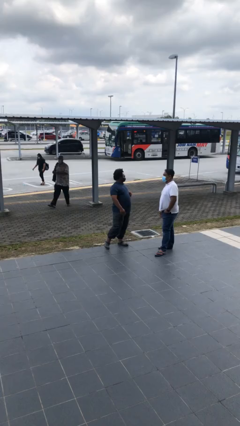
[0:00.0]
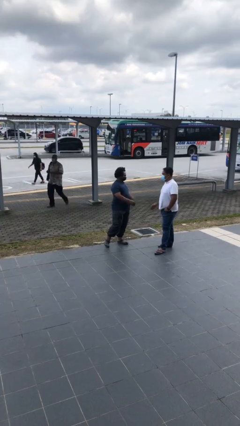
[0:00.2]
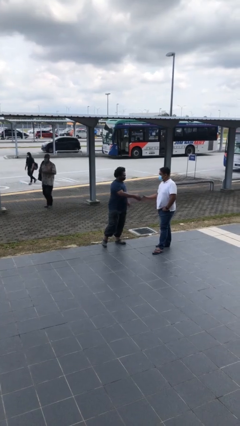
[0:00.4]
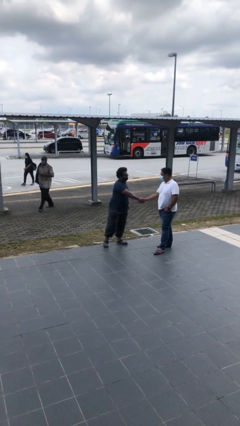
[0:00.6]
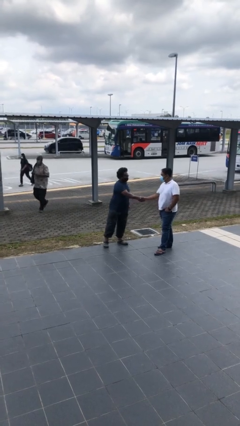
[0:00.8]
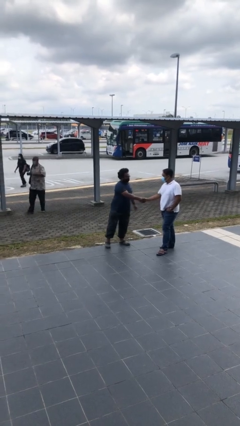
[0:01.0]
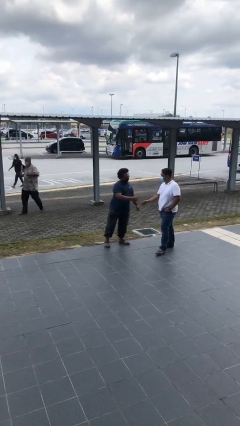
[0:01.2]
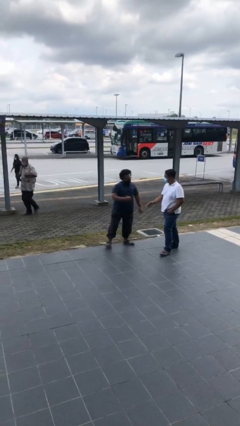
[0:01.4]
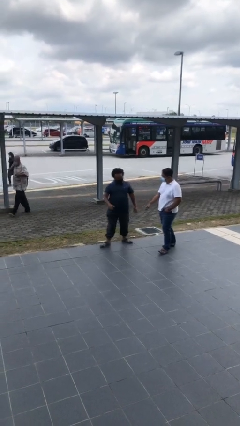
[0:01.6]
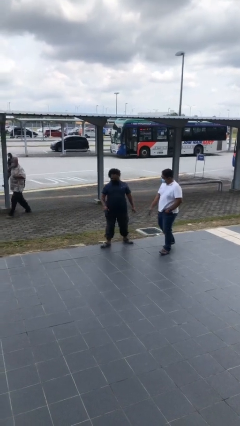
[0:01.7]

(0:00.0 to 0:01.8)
person shakes hand

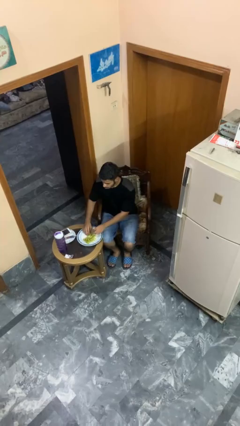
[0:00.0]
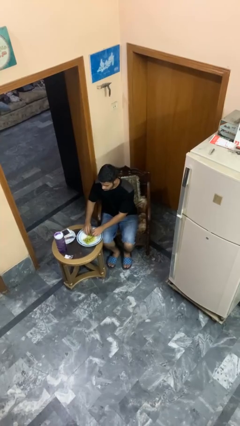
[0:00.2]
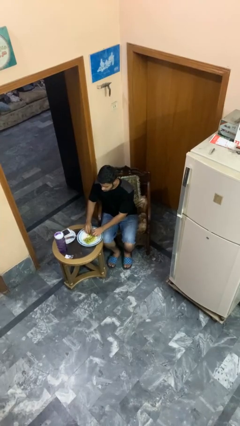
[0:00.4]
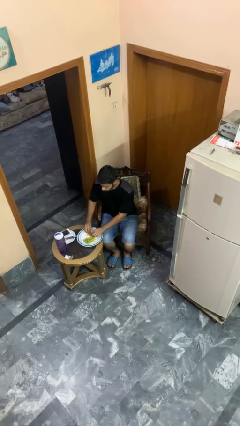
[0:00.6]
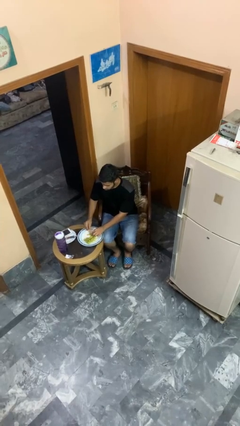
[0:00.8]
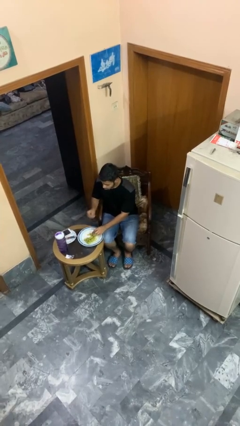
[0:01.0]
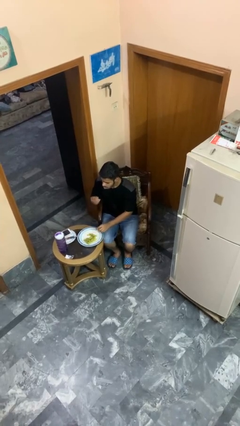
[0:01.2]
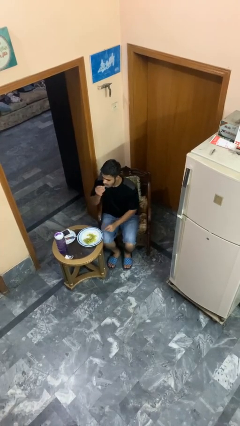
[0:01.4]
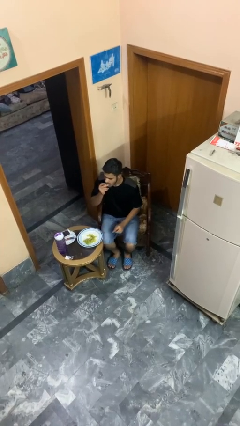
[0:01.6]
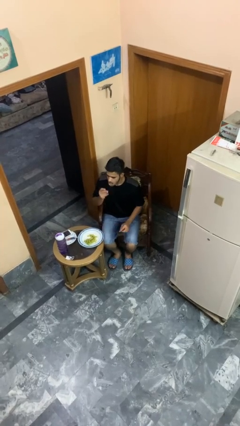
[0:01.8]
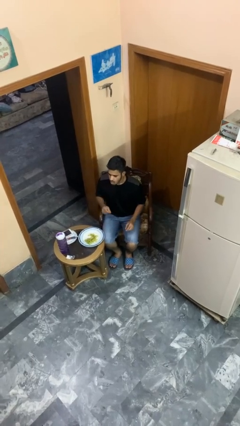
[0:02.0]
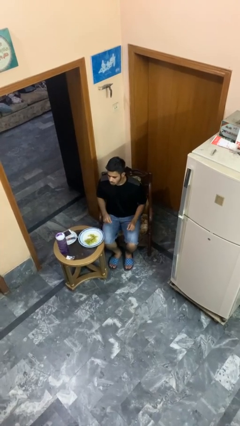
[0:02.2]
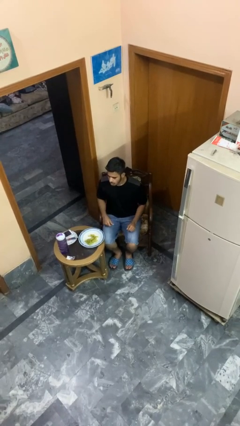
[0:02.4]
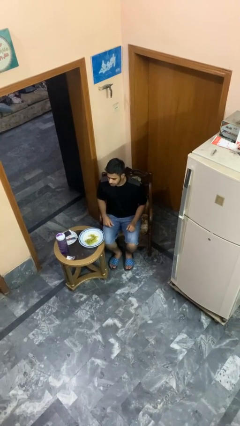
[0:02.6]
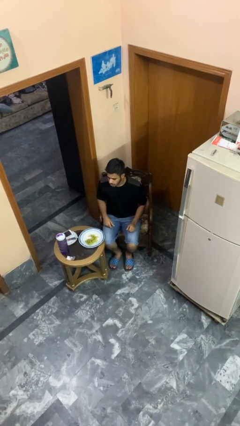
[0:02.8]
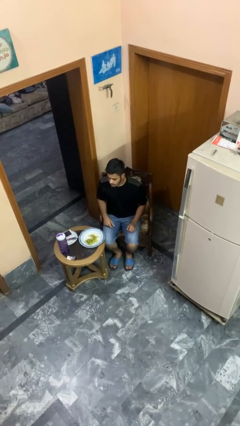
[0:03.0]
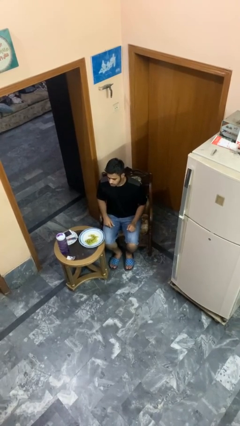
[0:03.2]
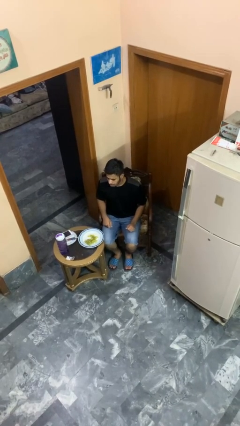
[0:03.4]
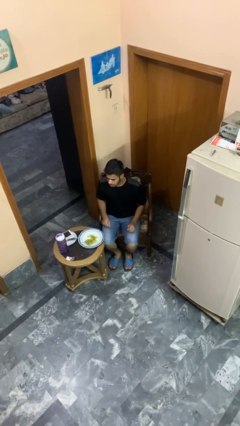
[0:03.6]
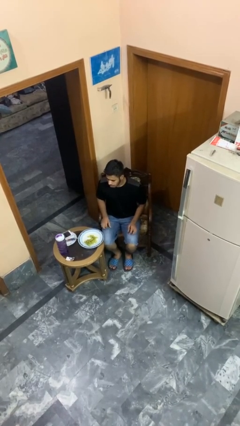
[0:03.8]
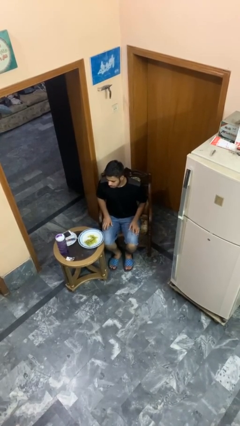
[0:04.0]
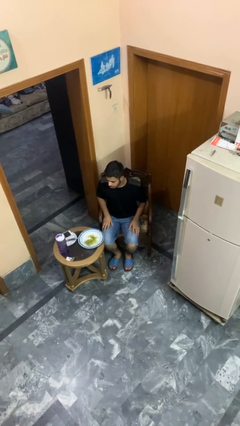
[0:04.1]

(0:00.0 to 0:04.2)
person eats with hands

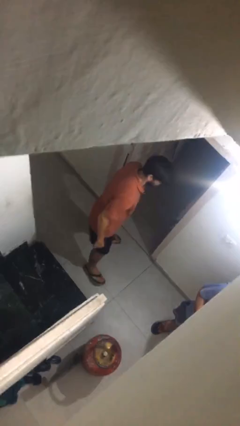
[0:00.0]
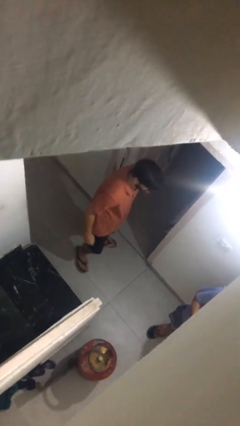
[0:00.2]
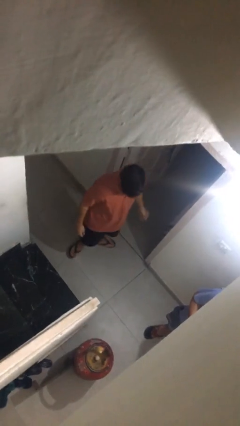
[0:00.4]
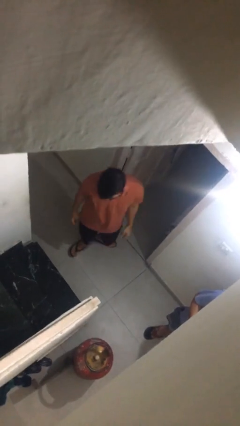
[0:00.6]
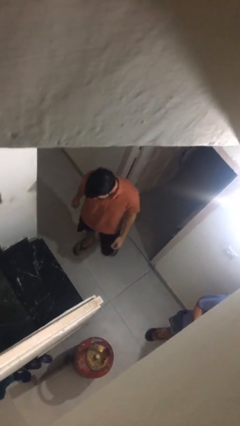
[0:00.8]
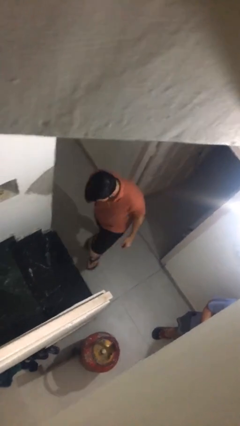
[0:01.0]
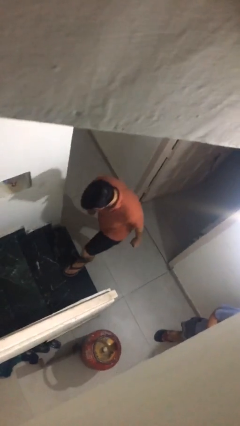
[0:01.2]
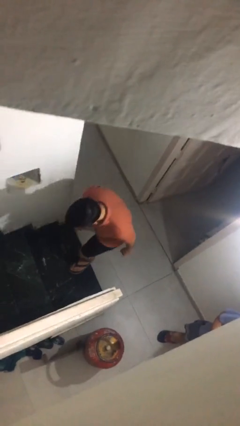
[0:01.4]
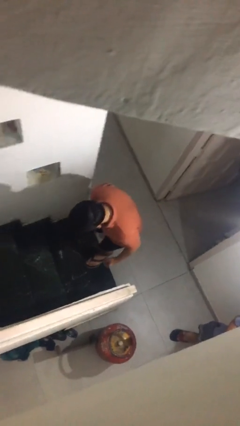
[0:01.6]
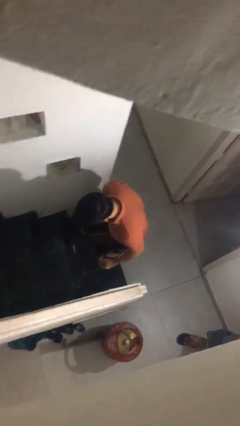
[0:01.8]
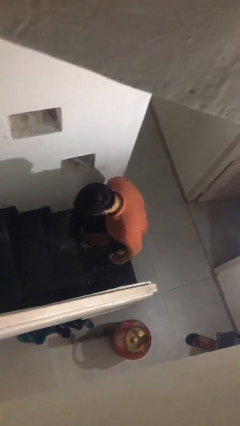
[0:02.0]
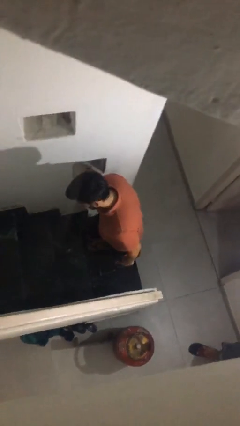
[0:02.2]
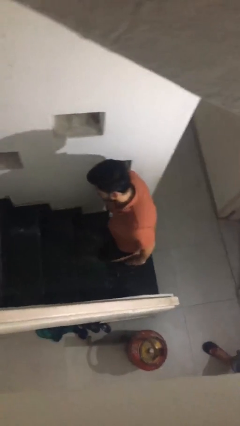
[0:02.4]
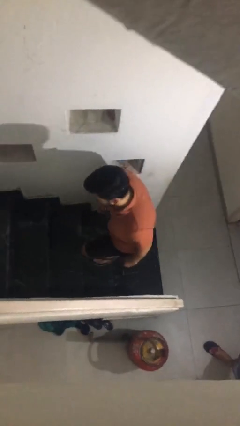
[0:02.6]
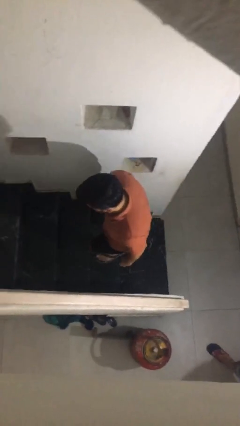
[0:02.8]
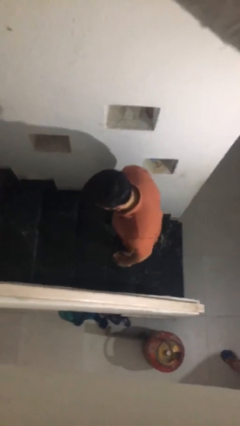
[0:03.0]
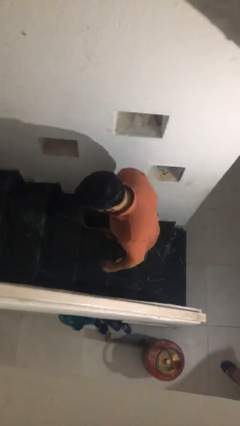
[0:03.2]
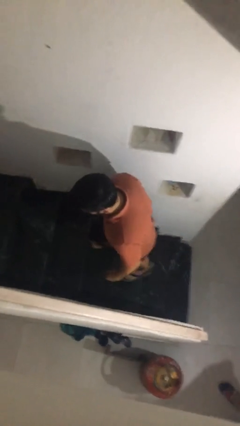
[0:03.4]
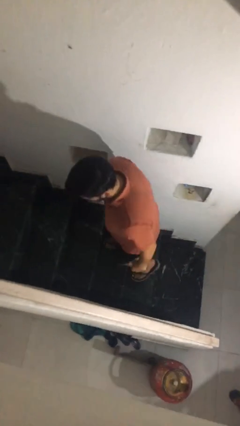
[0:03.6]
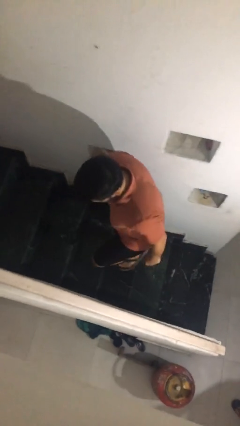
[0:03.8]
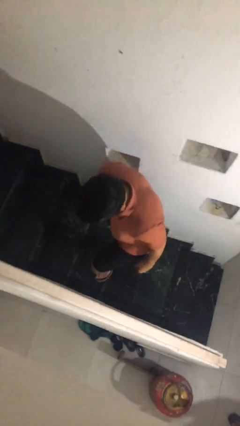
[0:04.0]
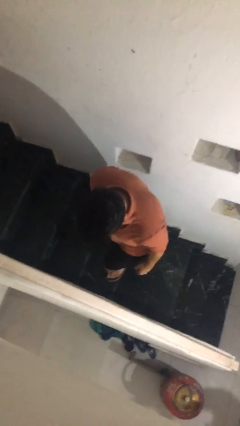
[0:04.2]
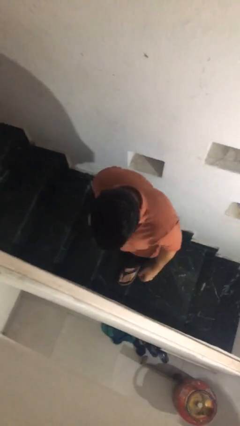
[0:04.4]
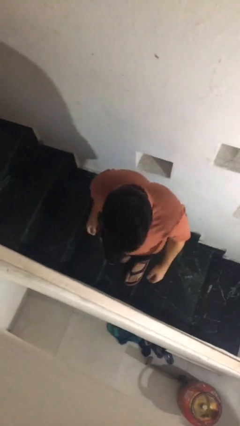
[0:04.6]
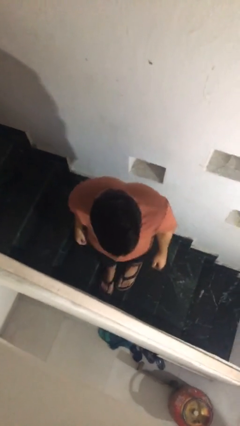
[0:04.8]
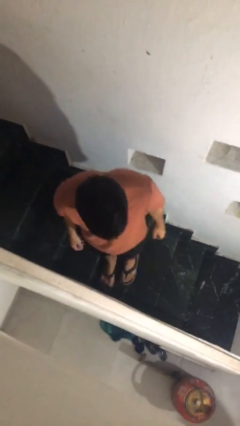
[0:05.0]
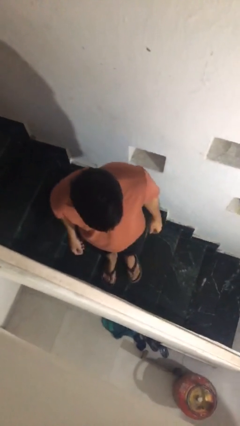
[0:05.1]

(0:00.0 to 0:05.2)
person climbs up stairs

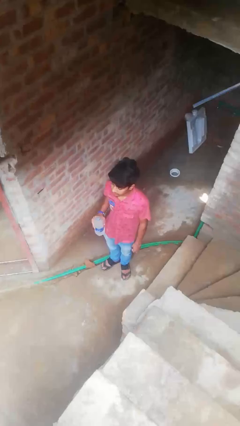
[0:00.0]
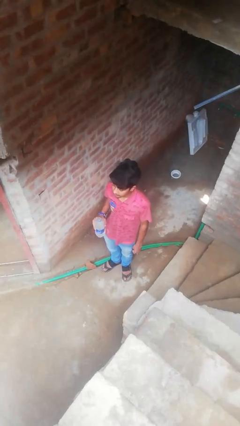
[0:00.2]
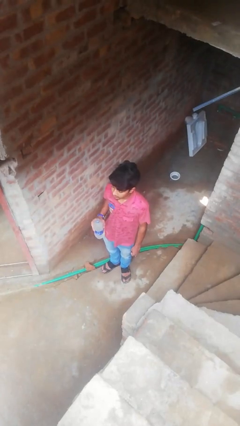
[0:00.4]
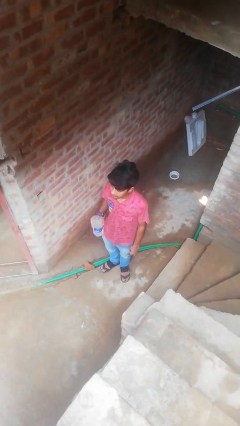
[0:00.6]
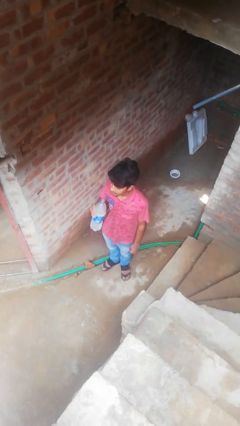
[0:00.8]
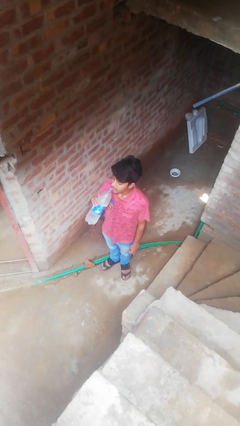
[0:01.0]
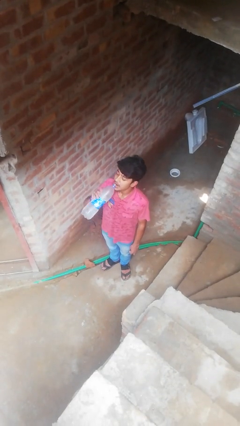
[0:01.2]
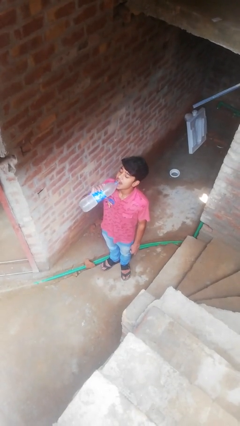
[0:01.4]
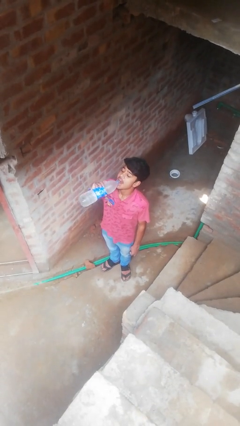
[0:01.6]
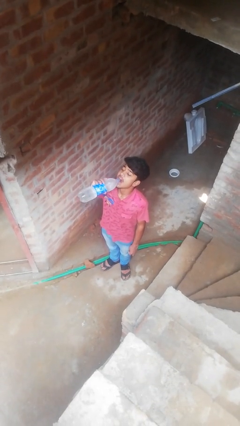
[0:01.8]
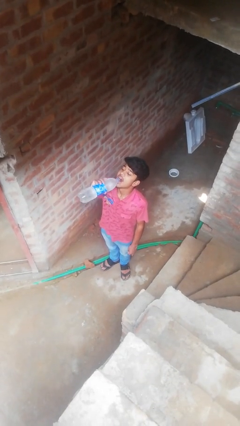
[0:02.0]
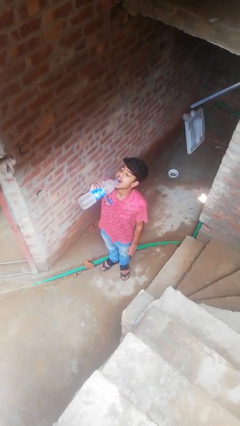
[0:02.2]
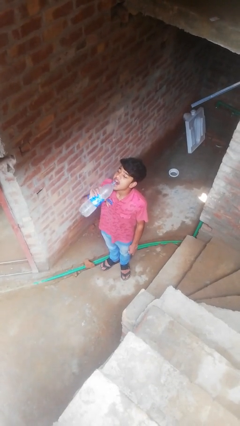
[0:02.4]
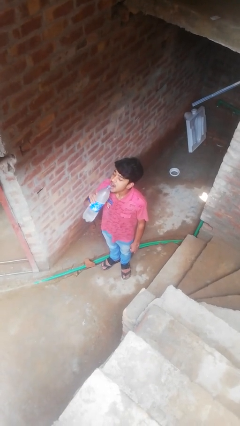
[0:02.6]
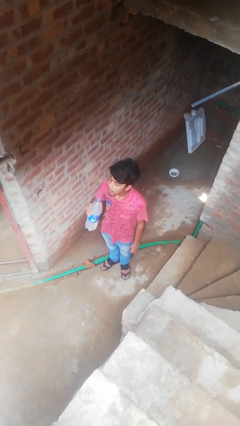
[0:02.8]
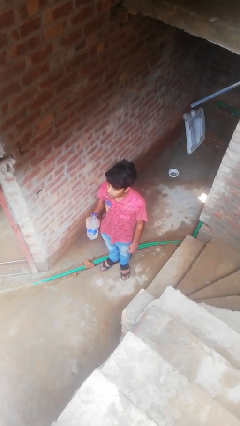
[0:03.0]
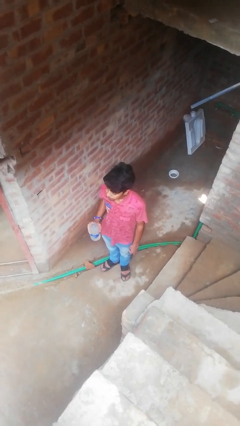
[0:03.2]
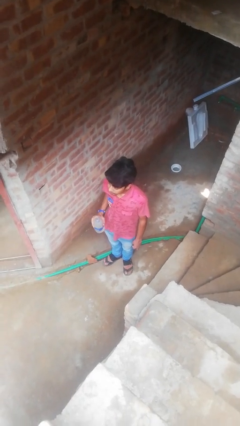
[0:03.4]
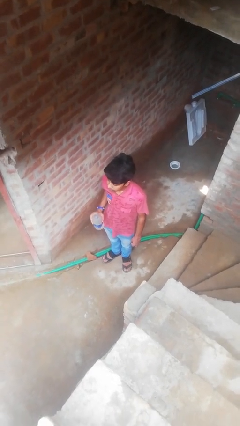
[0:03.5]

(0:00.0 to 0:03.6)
person drinks from bottle

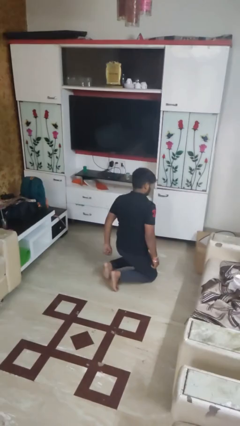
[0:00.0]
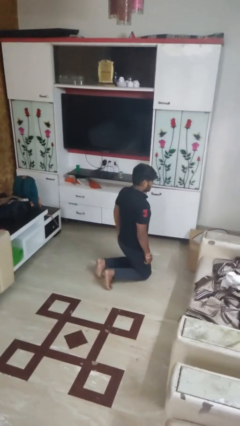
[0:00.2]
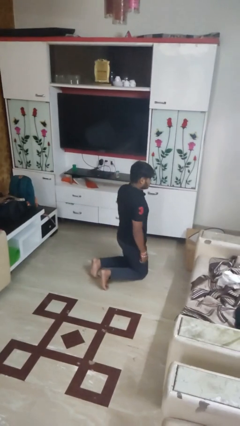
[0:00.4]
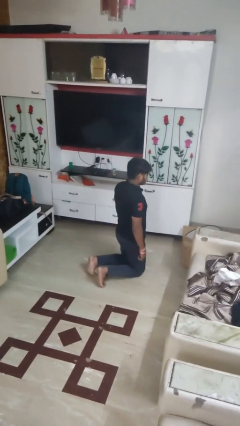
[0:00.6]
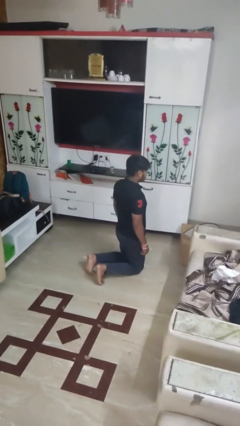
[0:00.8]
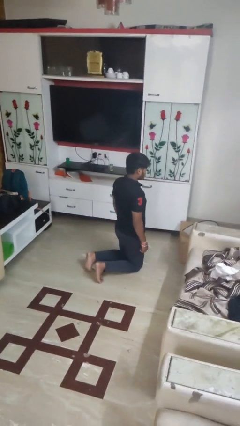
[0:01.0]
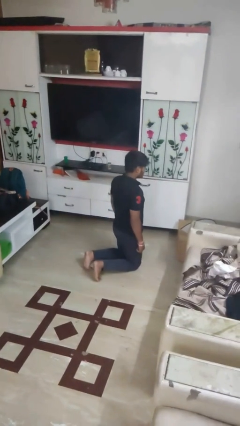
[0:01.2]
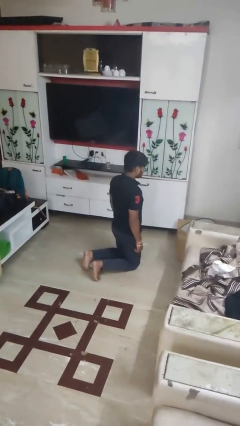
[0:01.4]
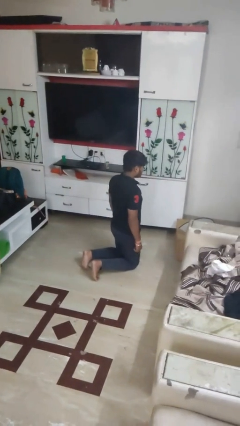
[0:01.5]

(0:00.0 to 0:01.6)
person kneels

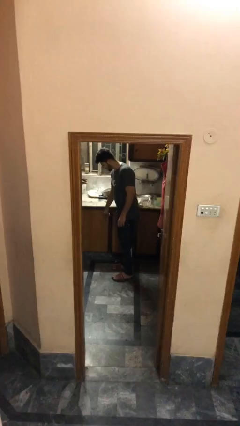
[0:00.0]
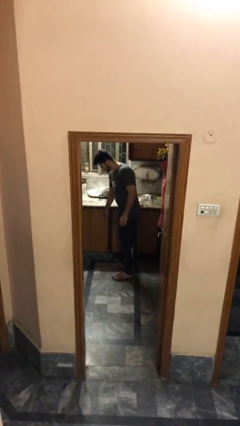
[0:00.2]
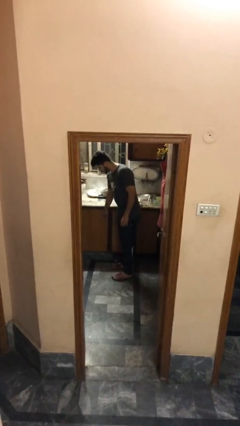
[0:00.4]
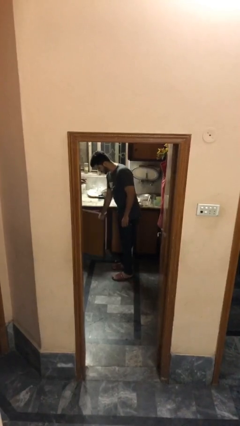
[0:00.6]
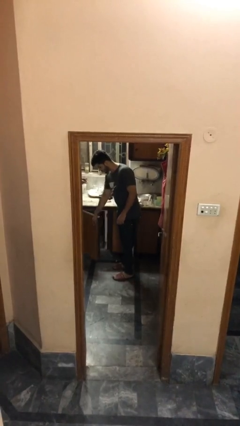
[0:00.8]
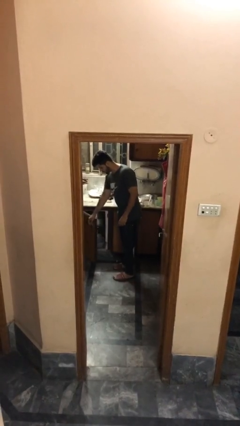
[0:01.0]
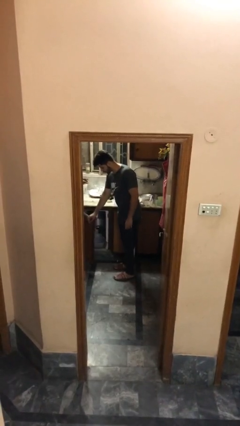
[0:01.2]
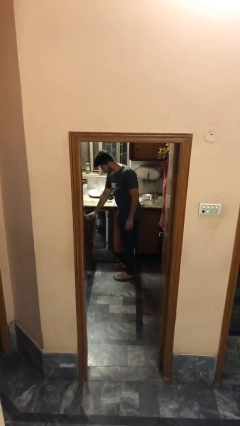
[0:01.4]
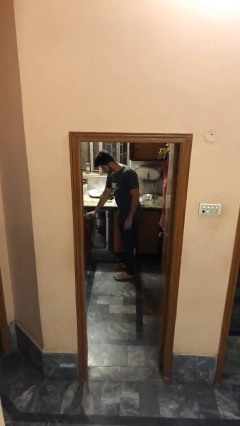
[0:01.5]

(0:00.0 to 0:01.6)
person opens cabinet
